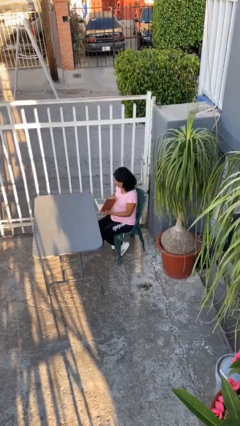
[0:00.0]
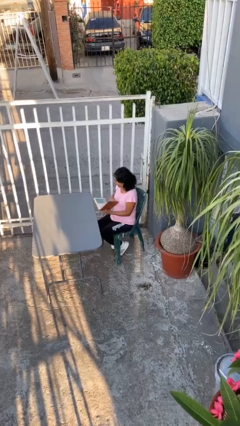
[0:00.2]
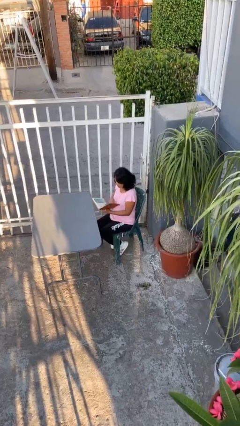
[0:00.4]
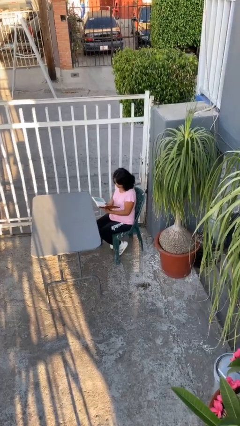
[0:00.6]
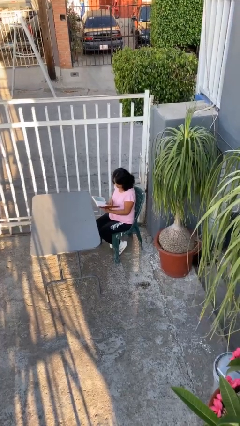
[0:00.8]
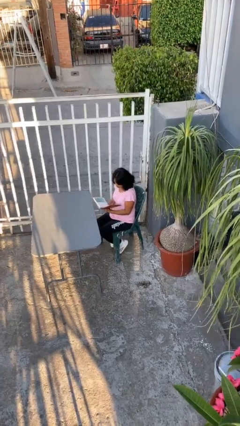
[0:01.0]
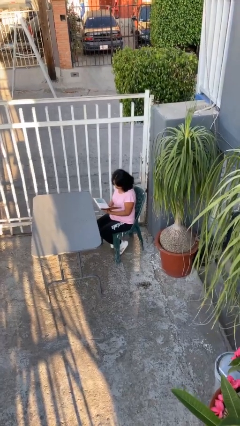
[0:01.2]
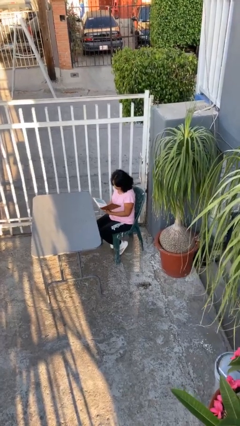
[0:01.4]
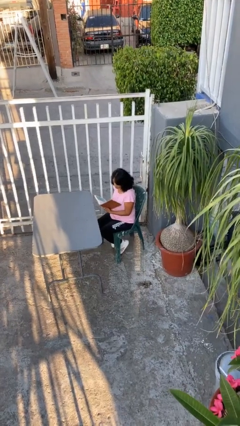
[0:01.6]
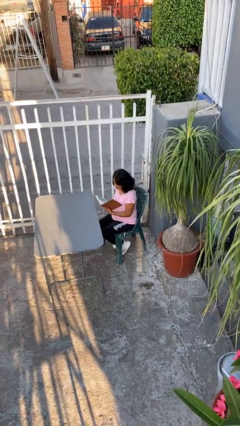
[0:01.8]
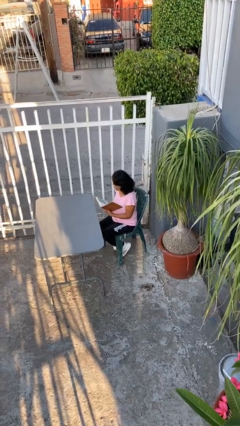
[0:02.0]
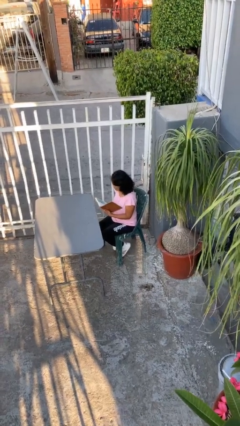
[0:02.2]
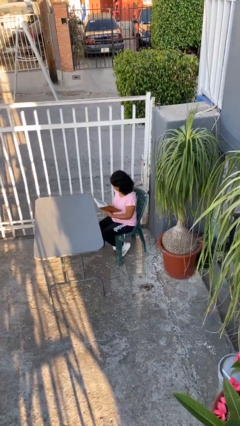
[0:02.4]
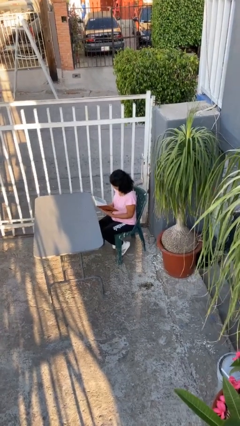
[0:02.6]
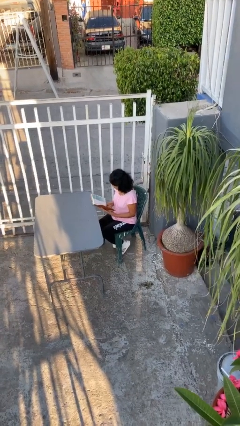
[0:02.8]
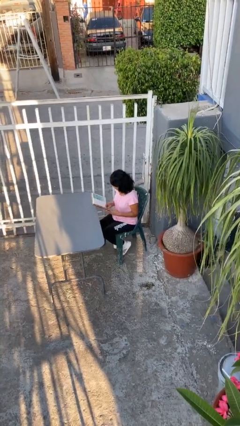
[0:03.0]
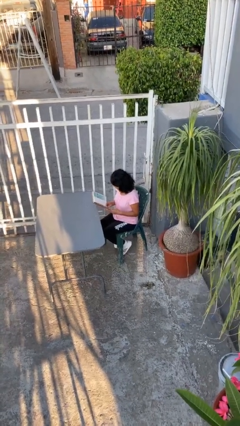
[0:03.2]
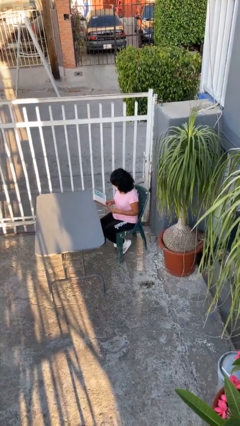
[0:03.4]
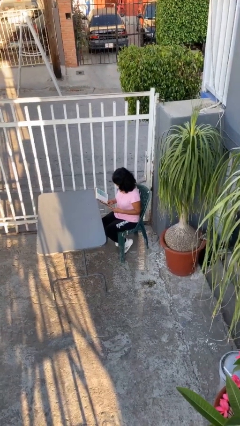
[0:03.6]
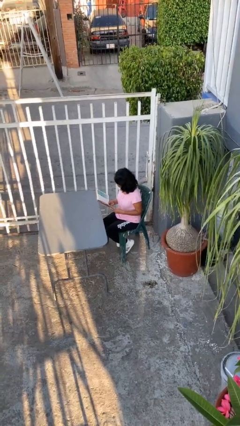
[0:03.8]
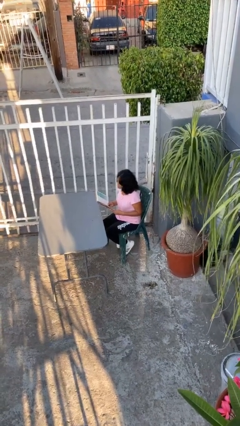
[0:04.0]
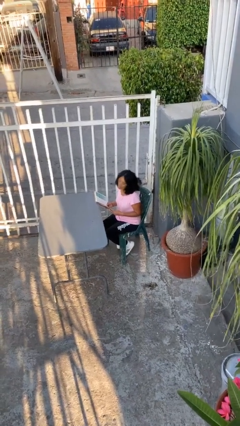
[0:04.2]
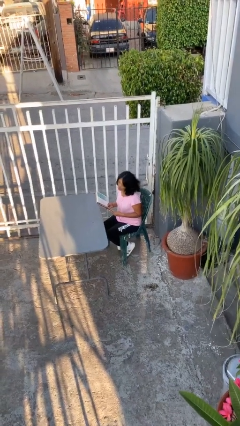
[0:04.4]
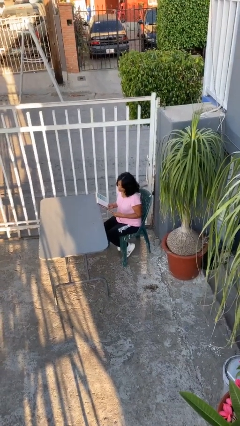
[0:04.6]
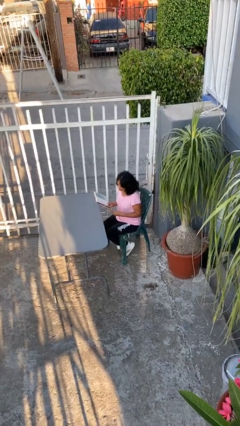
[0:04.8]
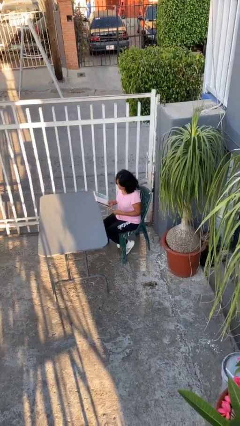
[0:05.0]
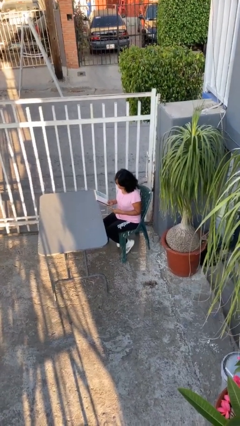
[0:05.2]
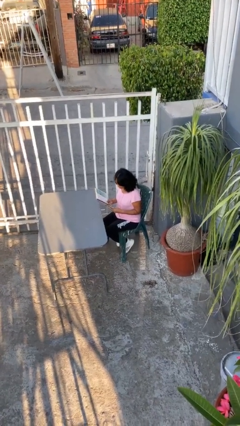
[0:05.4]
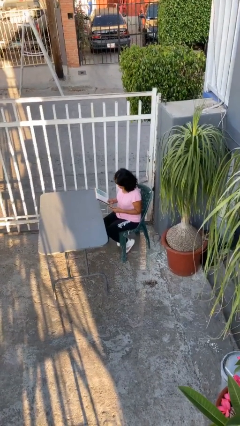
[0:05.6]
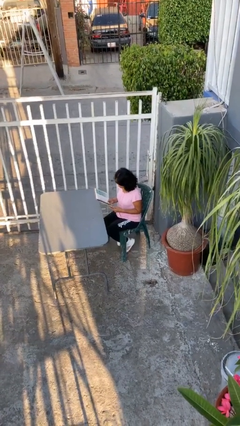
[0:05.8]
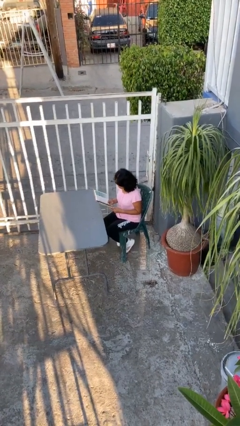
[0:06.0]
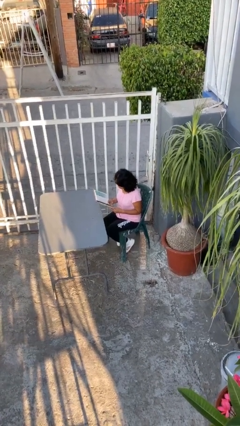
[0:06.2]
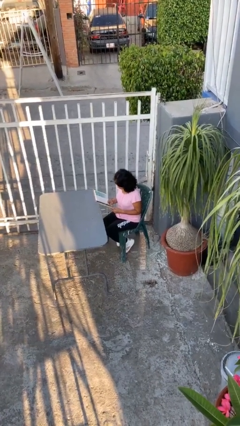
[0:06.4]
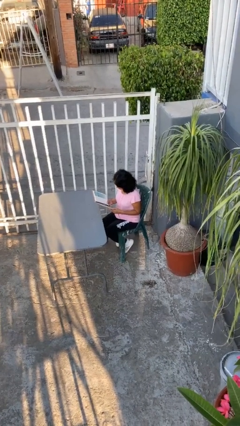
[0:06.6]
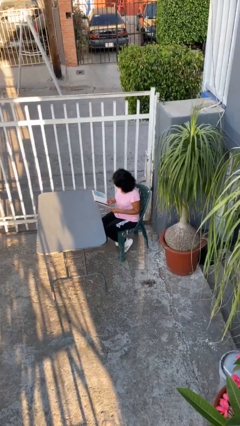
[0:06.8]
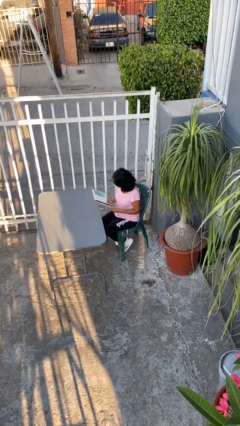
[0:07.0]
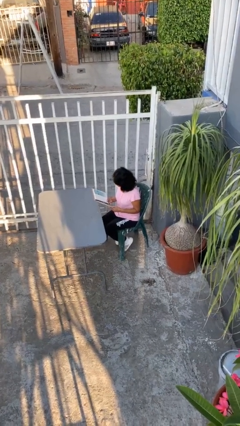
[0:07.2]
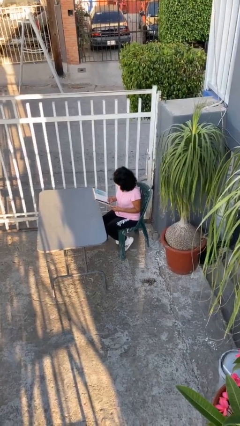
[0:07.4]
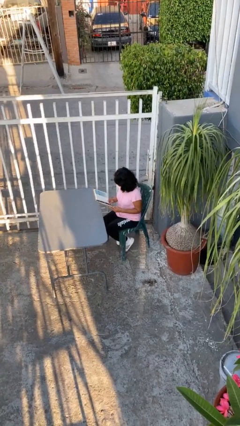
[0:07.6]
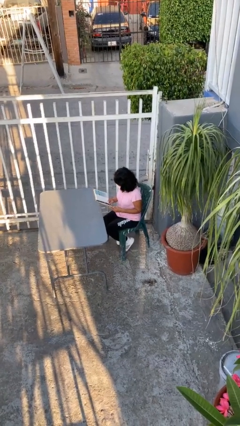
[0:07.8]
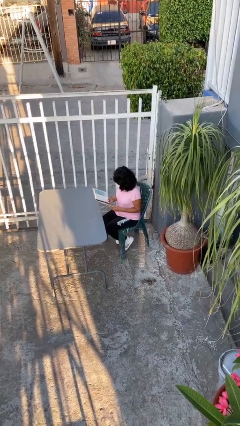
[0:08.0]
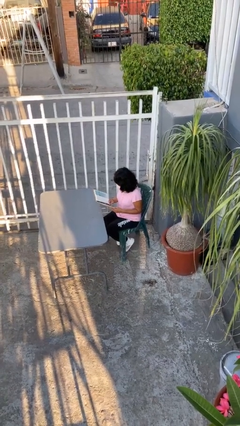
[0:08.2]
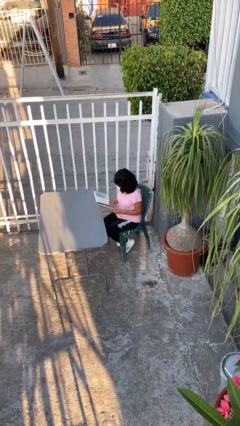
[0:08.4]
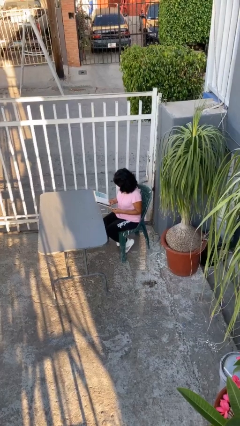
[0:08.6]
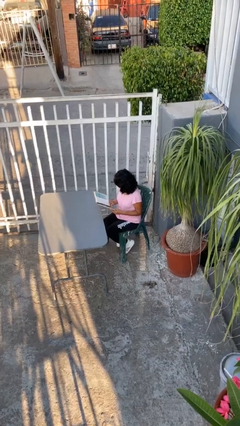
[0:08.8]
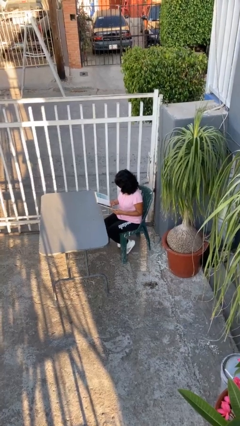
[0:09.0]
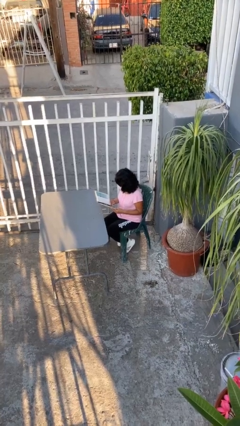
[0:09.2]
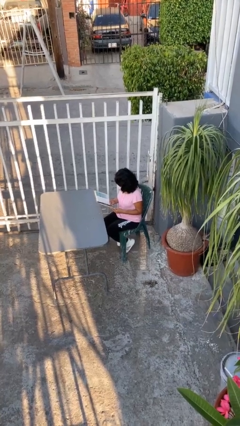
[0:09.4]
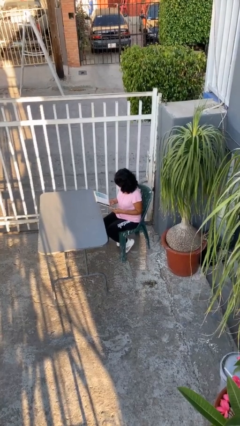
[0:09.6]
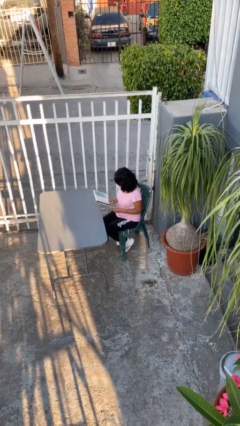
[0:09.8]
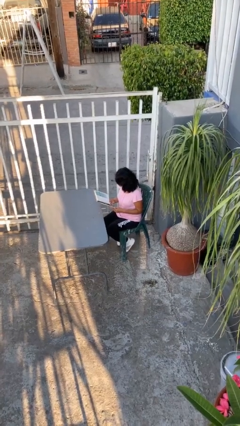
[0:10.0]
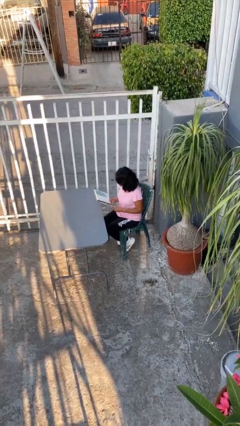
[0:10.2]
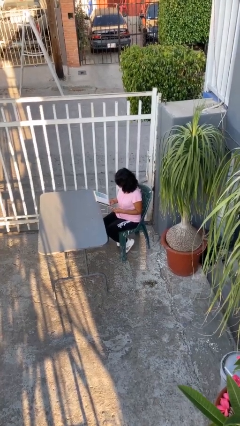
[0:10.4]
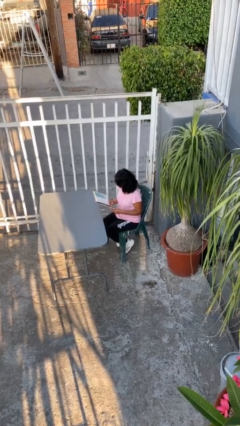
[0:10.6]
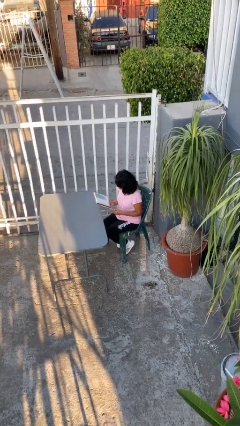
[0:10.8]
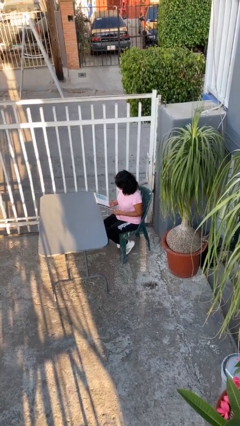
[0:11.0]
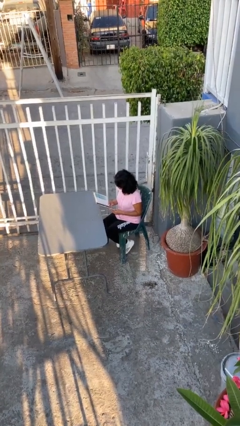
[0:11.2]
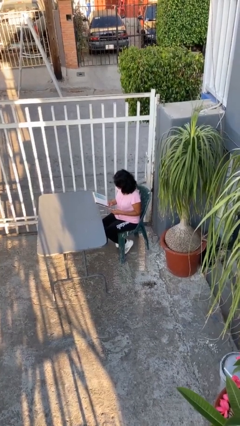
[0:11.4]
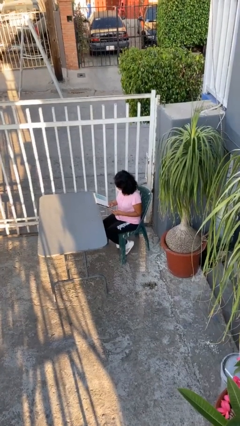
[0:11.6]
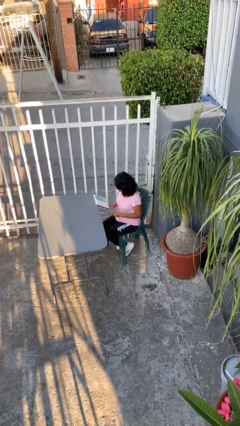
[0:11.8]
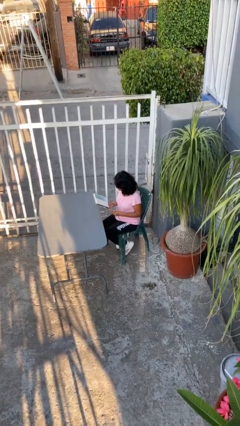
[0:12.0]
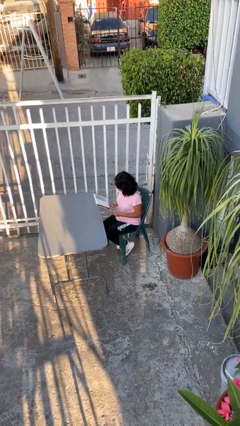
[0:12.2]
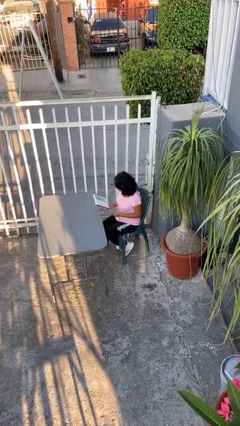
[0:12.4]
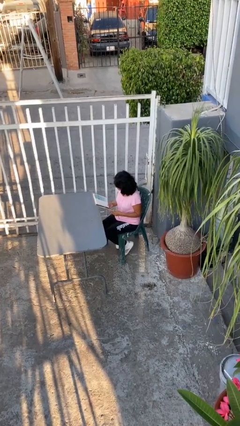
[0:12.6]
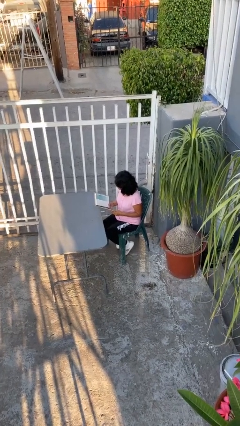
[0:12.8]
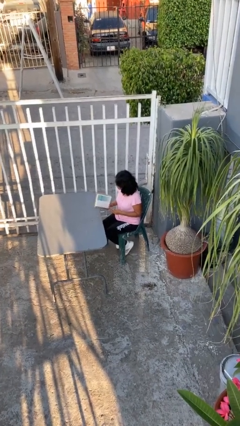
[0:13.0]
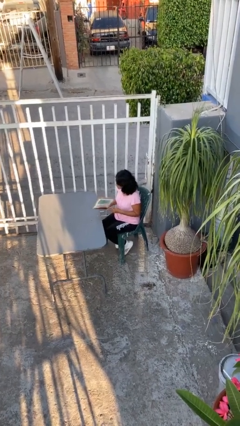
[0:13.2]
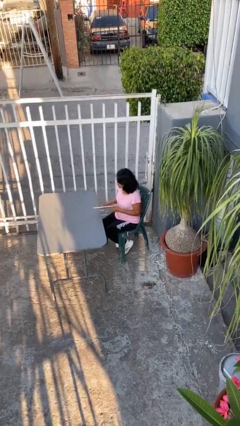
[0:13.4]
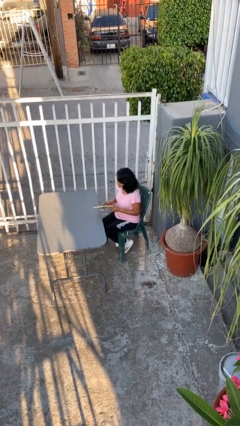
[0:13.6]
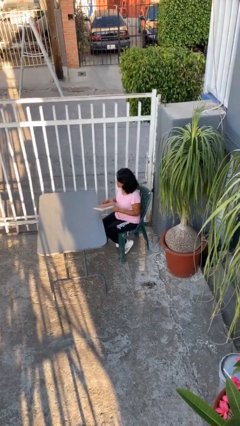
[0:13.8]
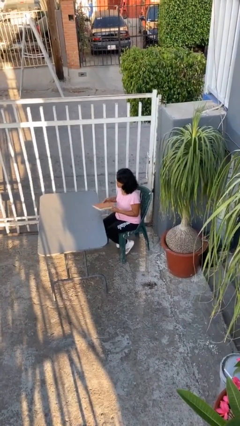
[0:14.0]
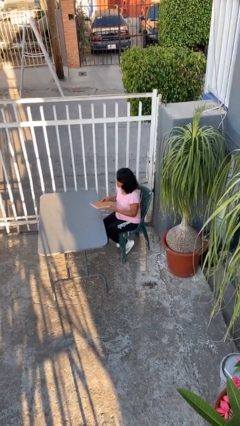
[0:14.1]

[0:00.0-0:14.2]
person reads document

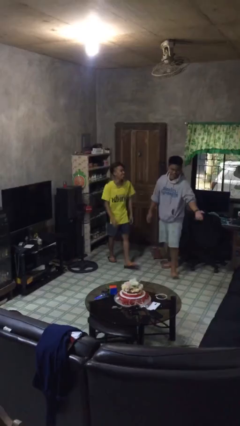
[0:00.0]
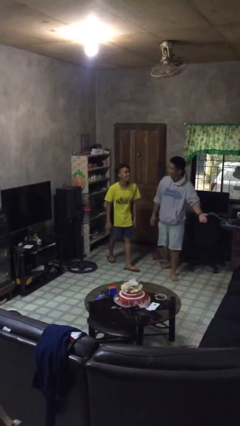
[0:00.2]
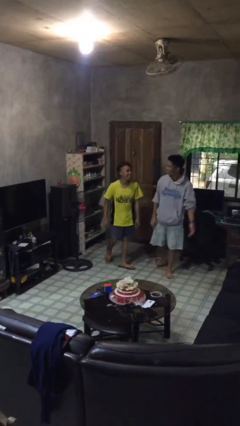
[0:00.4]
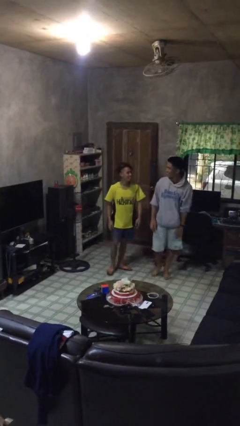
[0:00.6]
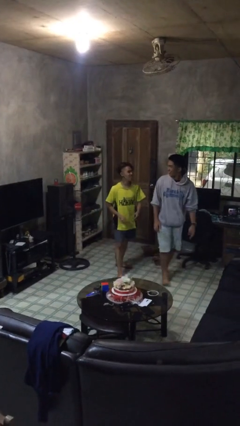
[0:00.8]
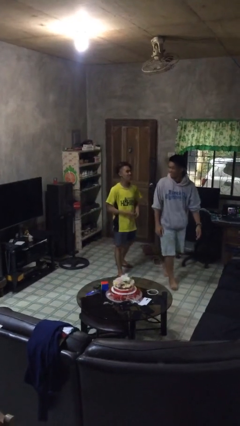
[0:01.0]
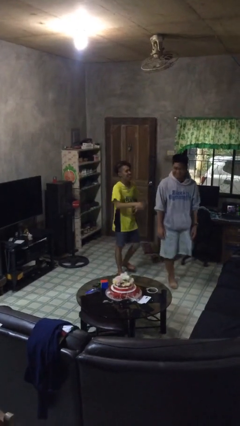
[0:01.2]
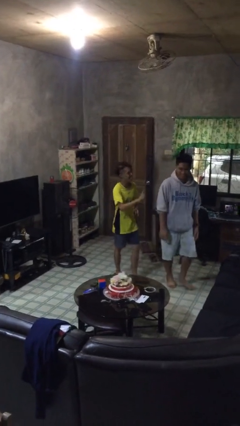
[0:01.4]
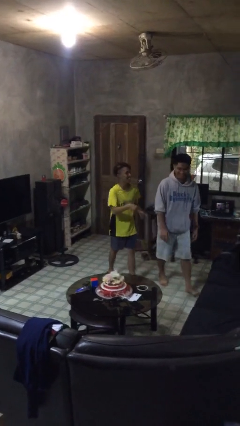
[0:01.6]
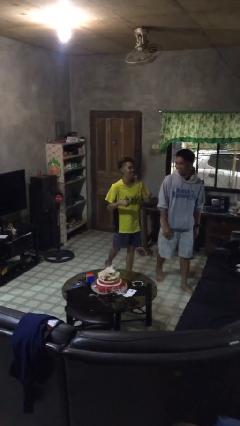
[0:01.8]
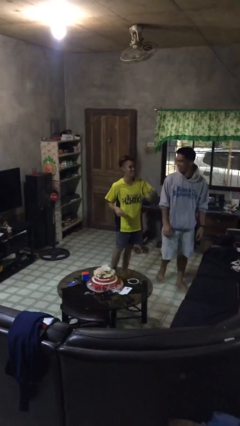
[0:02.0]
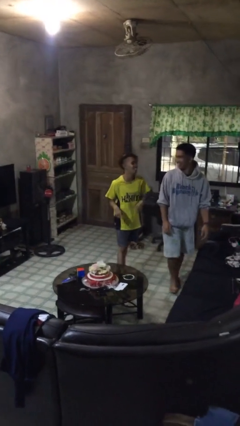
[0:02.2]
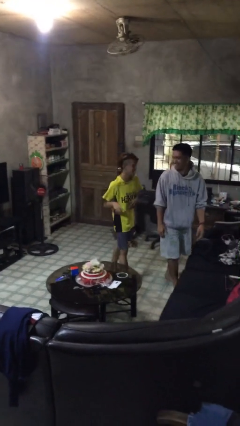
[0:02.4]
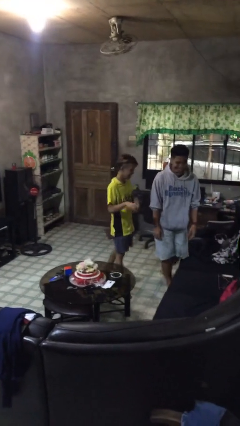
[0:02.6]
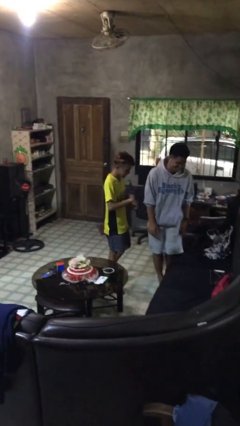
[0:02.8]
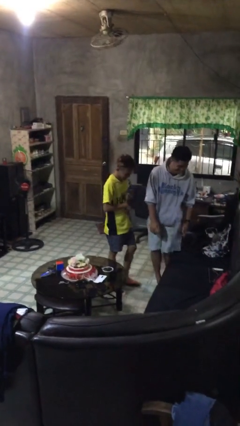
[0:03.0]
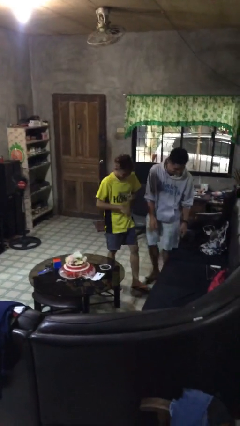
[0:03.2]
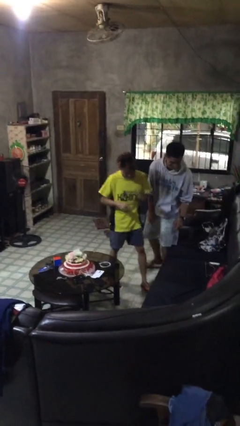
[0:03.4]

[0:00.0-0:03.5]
person talks to person

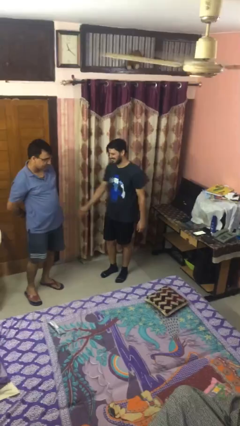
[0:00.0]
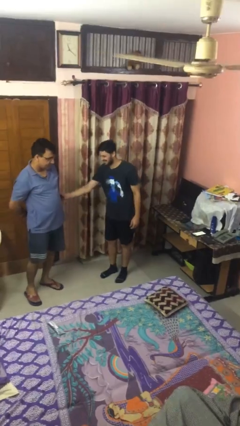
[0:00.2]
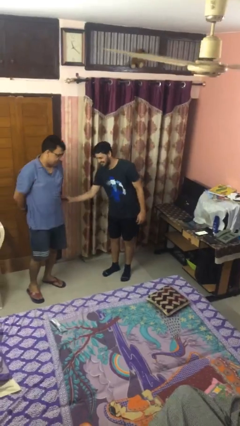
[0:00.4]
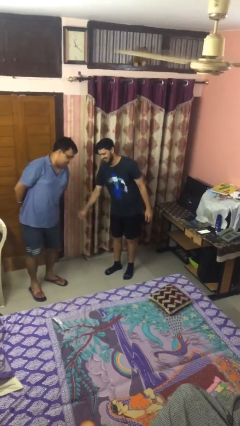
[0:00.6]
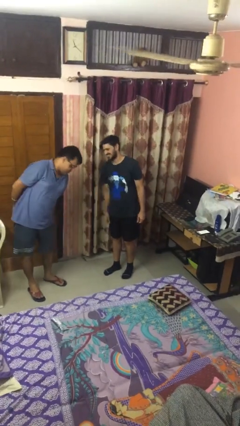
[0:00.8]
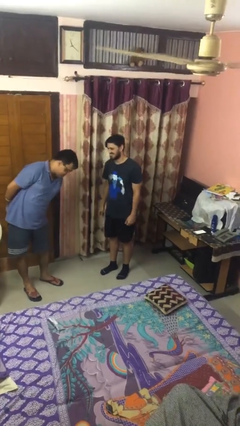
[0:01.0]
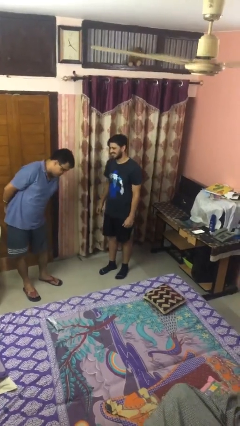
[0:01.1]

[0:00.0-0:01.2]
person tickles person
